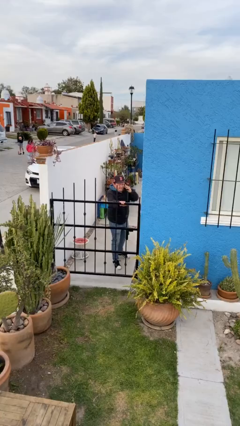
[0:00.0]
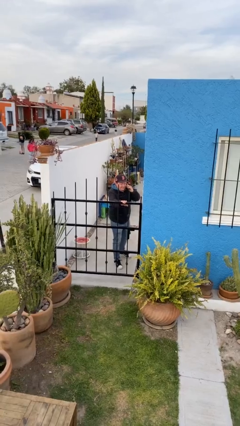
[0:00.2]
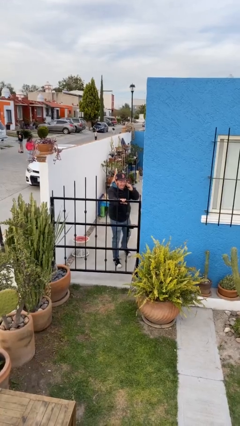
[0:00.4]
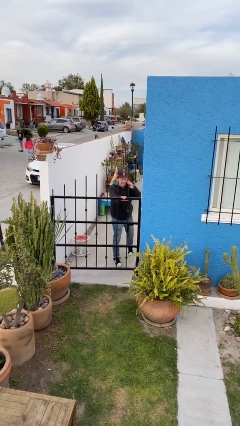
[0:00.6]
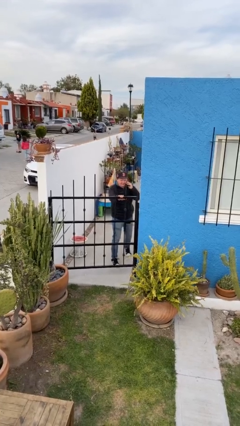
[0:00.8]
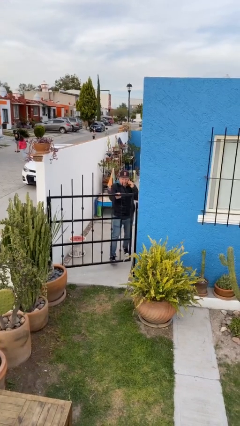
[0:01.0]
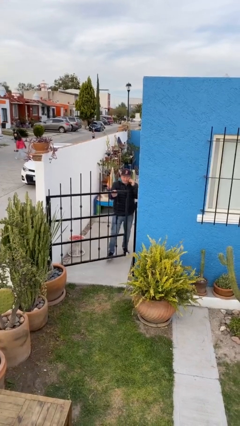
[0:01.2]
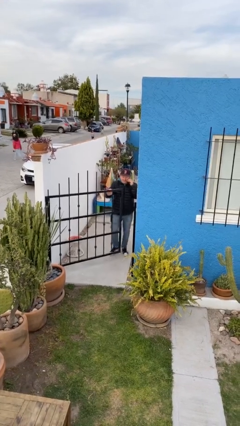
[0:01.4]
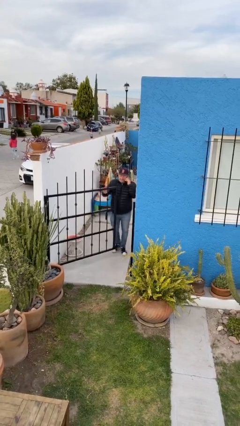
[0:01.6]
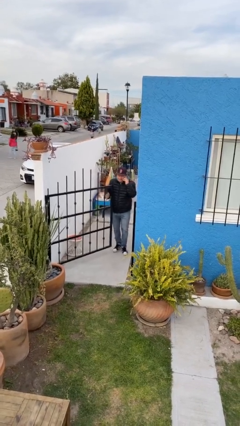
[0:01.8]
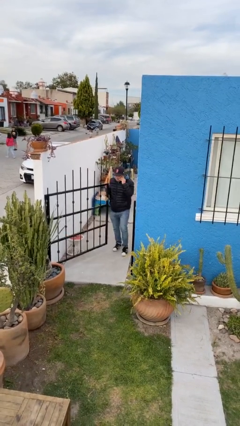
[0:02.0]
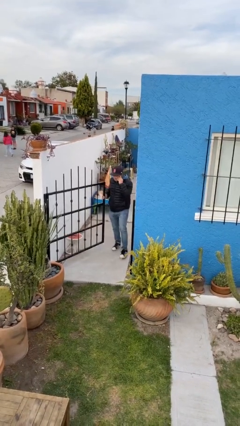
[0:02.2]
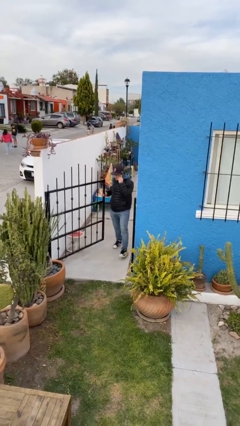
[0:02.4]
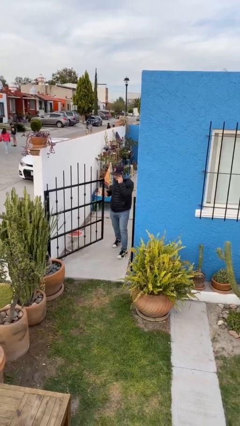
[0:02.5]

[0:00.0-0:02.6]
person opens facility door

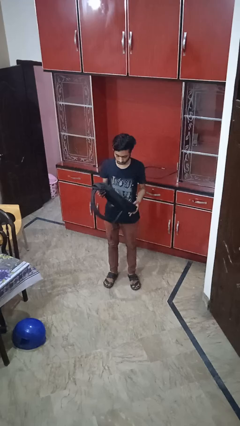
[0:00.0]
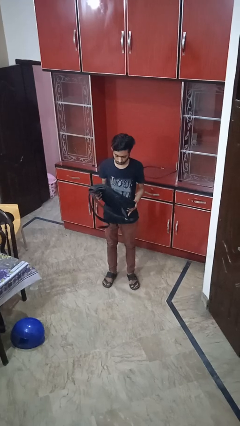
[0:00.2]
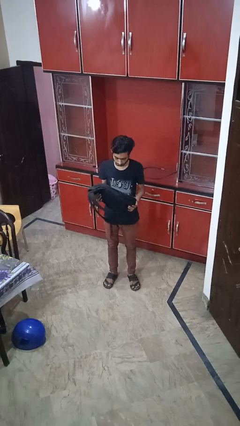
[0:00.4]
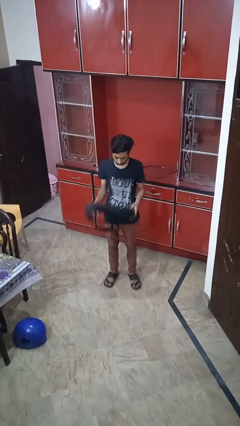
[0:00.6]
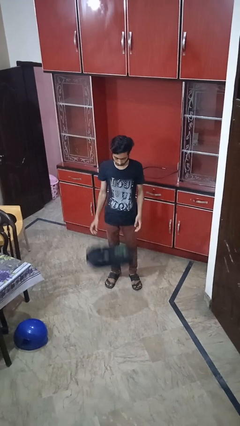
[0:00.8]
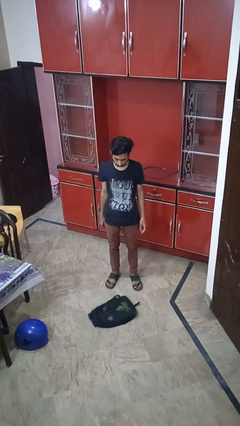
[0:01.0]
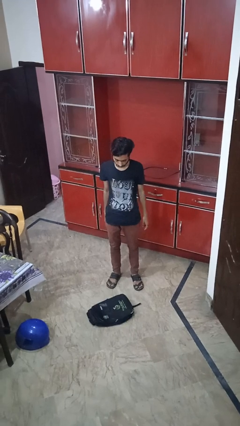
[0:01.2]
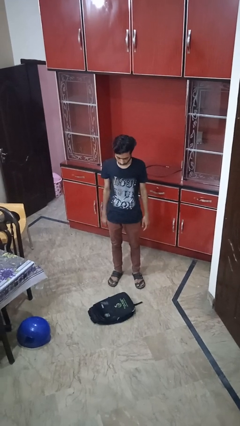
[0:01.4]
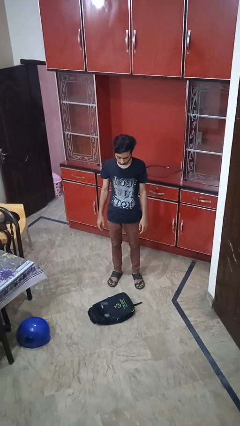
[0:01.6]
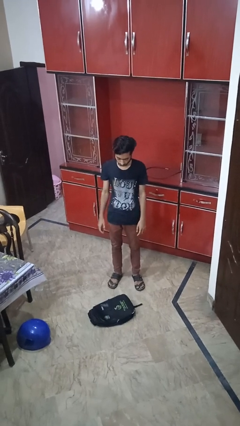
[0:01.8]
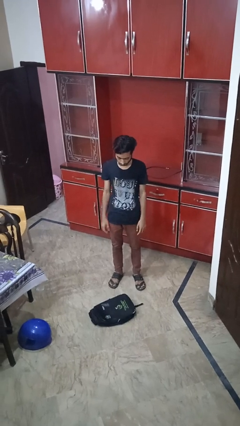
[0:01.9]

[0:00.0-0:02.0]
person drops object

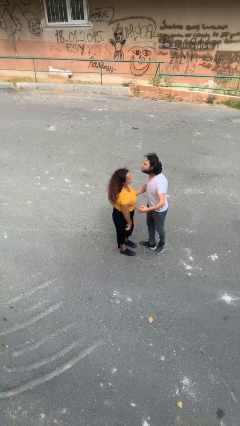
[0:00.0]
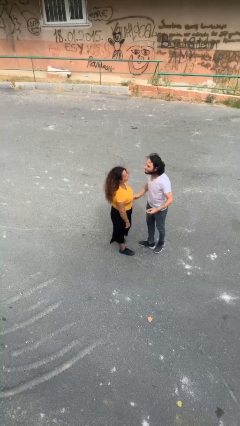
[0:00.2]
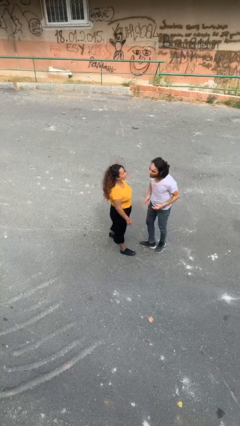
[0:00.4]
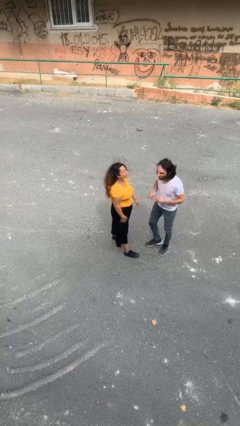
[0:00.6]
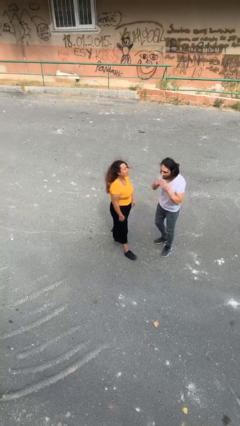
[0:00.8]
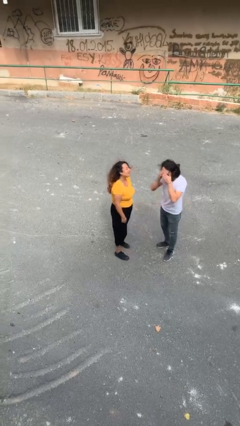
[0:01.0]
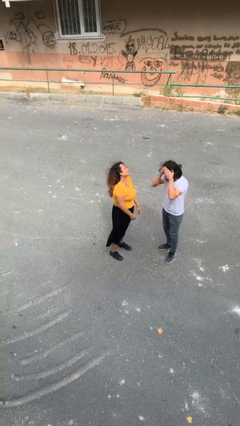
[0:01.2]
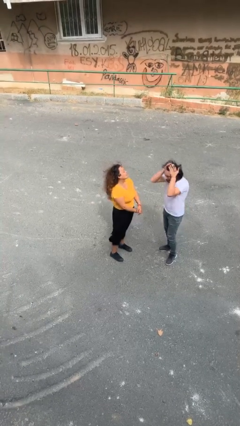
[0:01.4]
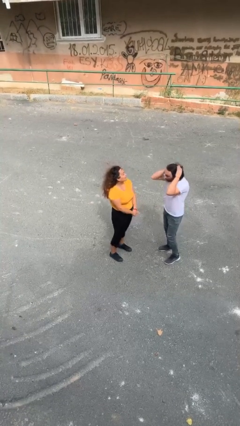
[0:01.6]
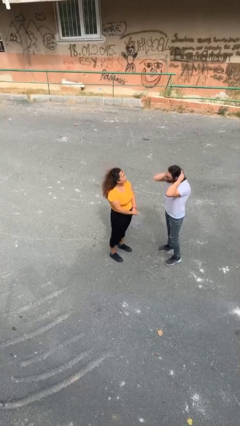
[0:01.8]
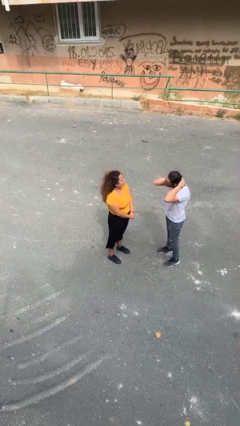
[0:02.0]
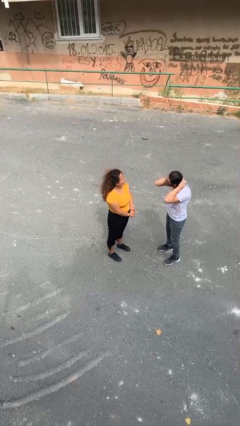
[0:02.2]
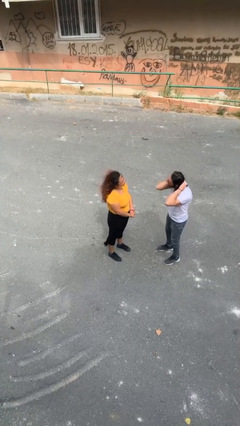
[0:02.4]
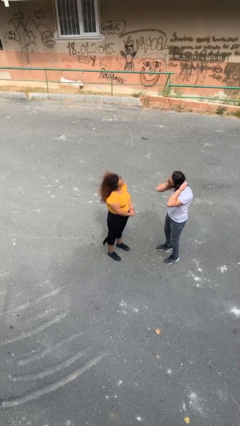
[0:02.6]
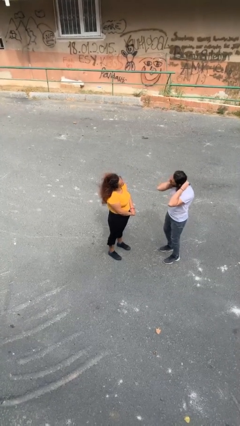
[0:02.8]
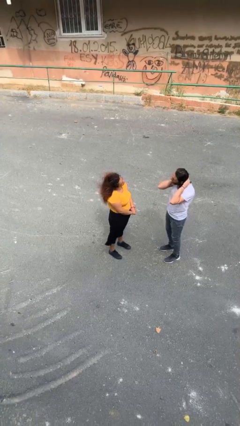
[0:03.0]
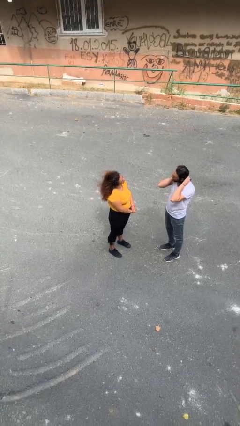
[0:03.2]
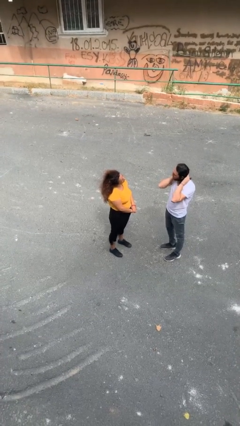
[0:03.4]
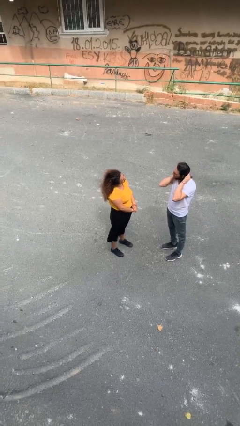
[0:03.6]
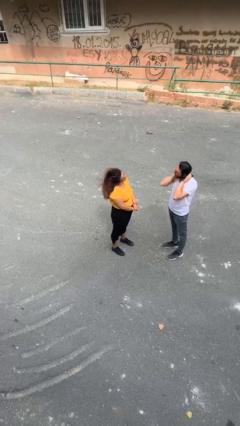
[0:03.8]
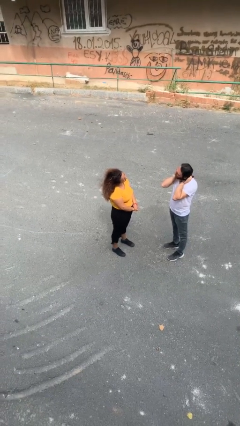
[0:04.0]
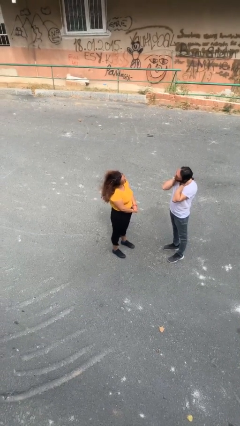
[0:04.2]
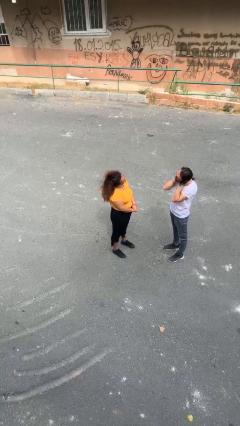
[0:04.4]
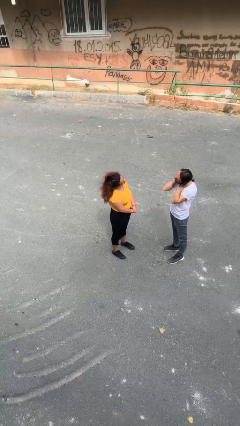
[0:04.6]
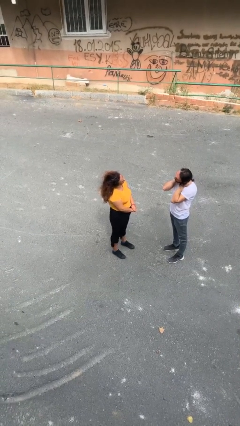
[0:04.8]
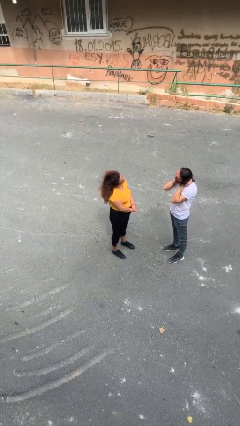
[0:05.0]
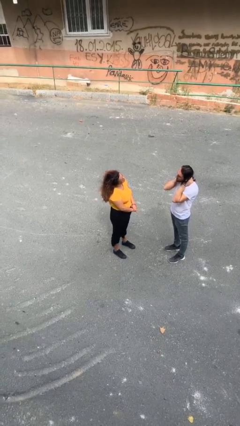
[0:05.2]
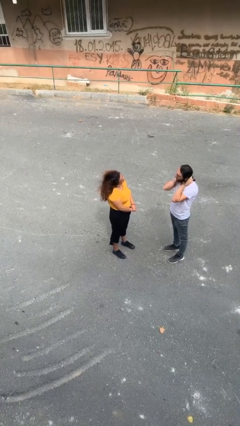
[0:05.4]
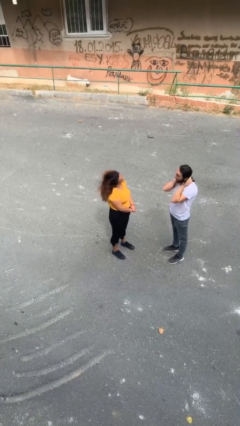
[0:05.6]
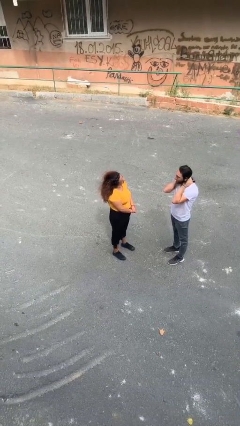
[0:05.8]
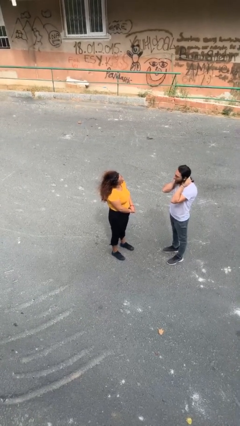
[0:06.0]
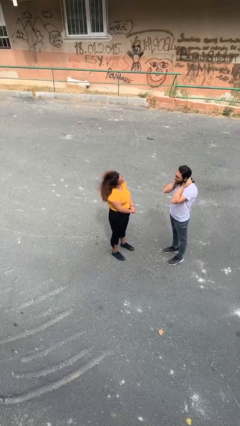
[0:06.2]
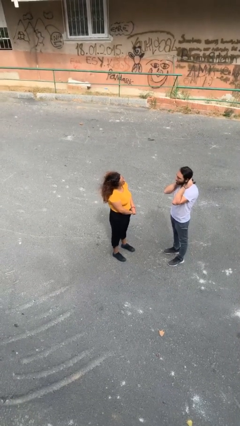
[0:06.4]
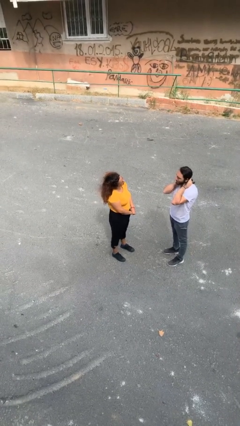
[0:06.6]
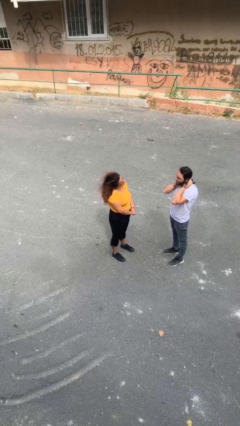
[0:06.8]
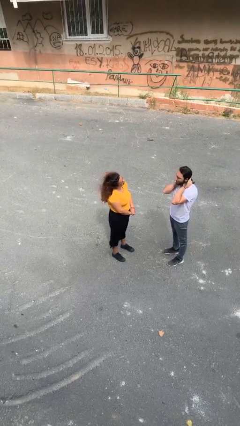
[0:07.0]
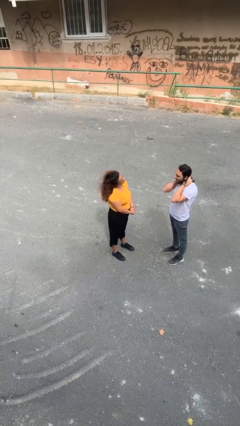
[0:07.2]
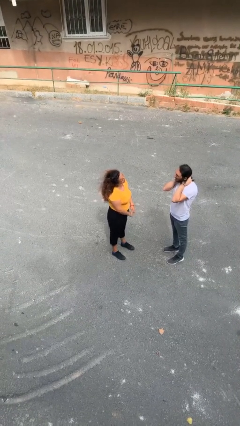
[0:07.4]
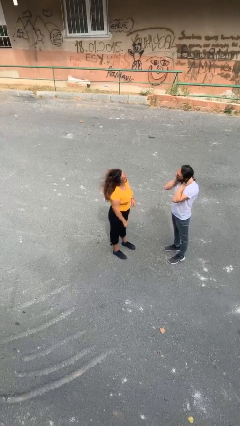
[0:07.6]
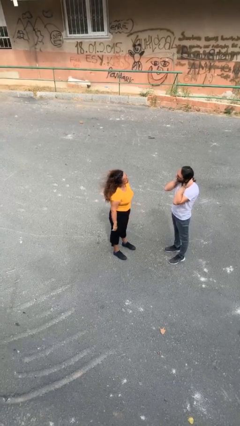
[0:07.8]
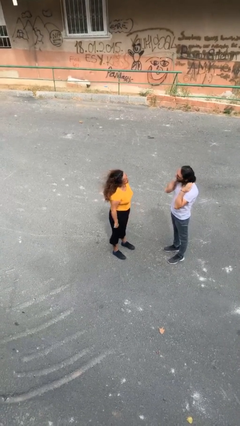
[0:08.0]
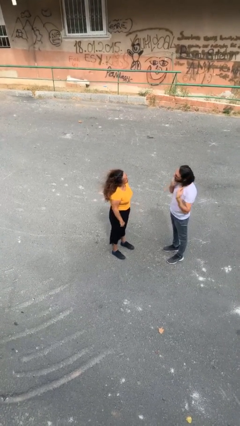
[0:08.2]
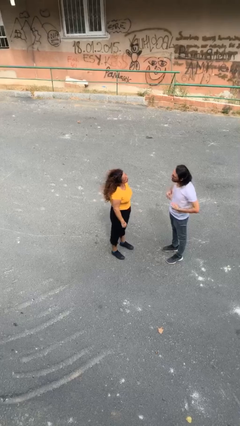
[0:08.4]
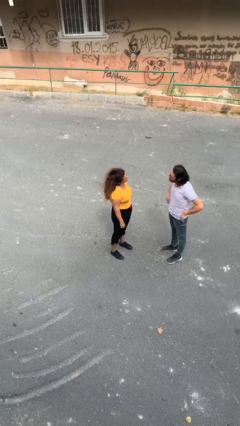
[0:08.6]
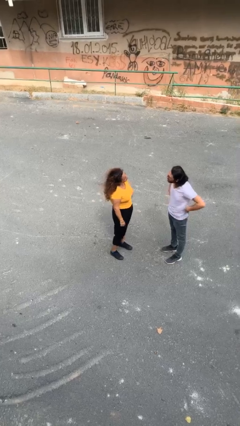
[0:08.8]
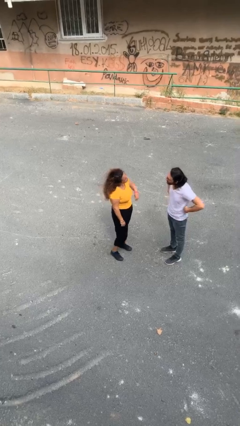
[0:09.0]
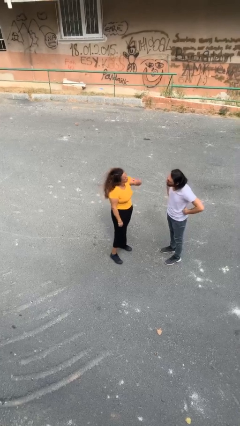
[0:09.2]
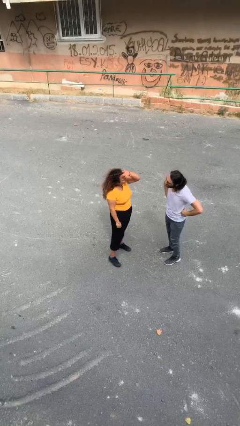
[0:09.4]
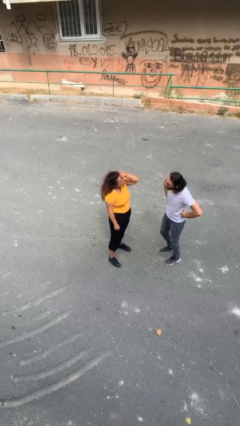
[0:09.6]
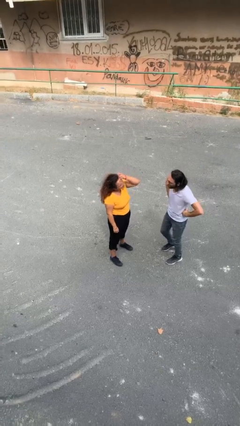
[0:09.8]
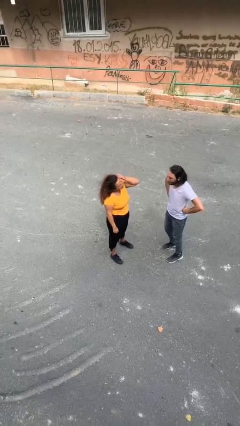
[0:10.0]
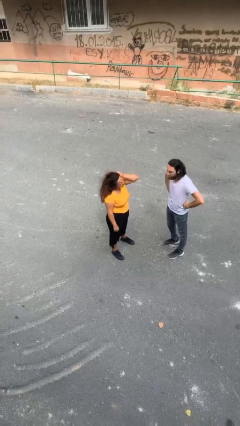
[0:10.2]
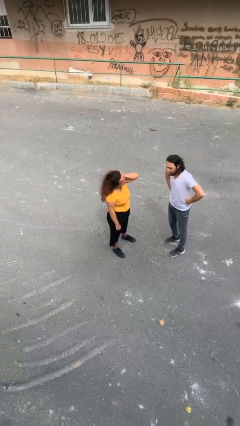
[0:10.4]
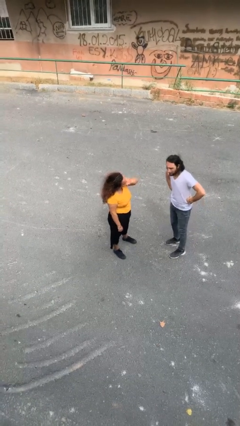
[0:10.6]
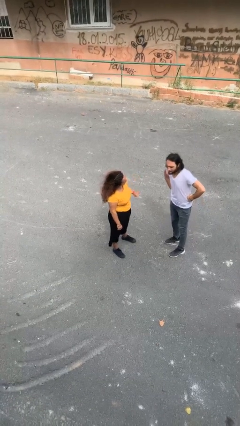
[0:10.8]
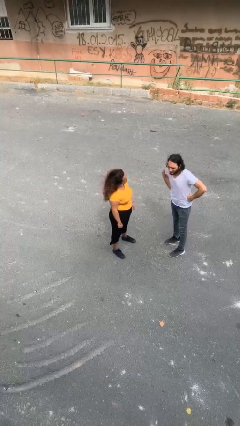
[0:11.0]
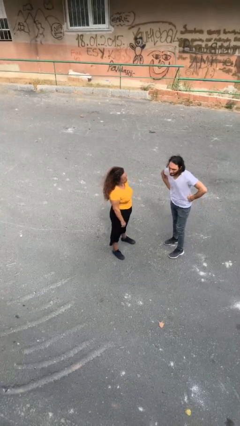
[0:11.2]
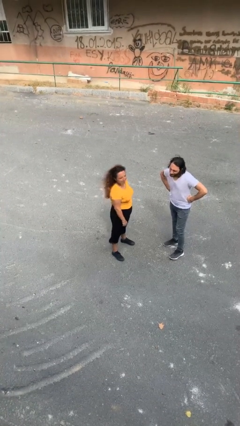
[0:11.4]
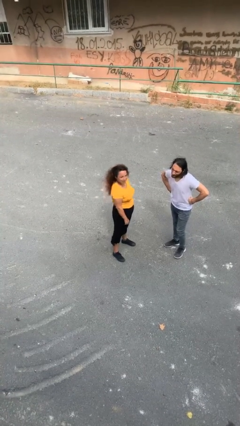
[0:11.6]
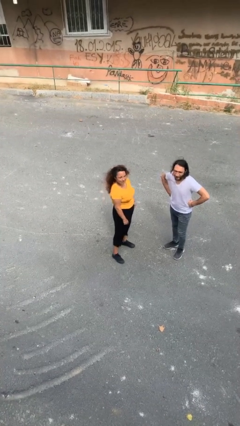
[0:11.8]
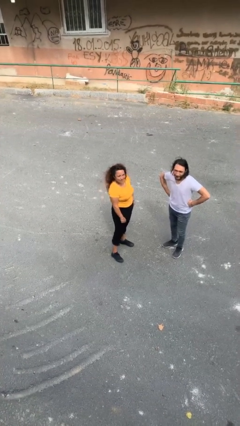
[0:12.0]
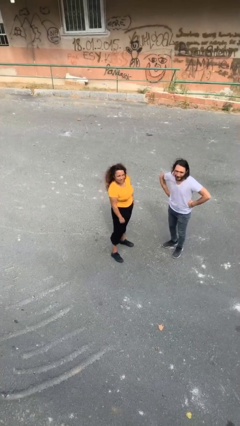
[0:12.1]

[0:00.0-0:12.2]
person talks to person

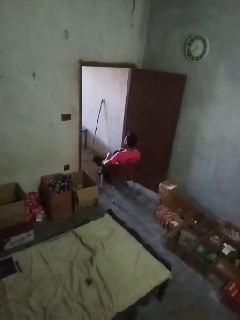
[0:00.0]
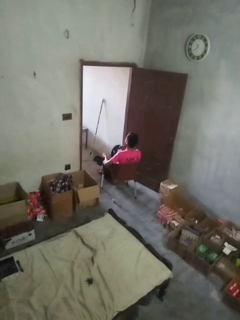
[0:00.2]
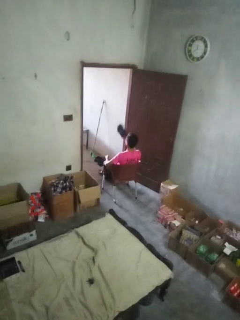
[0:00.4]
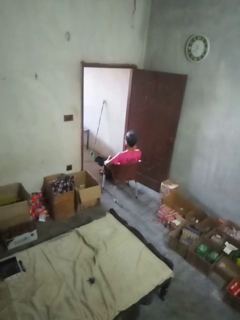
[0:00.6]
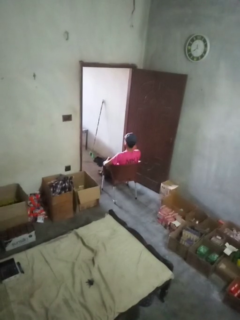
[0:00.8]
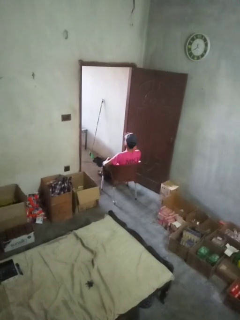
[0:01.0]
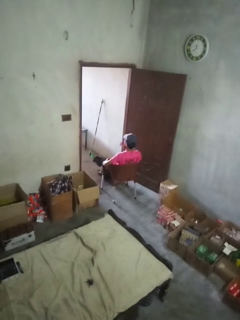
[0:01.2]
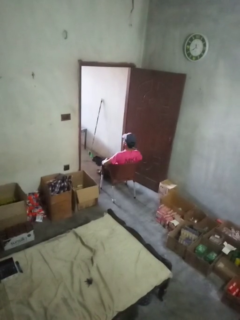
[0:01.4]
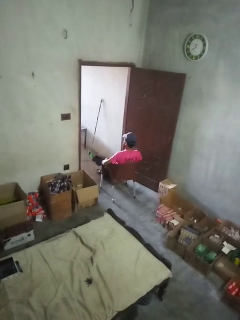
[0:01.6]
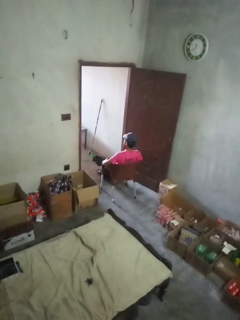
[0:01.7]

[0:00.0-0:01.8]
person puts on hat

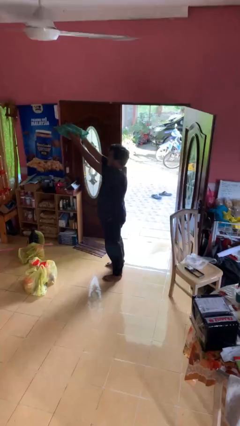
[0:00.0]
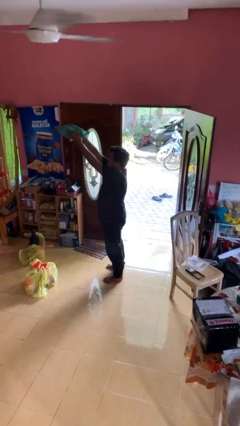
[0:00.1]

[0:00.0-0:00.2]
person picks up object from floor
